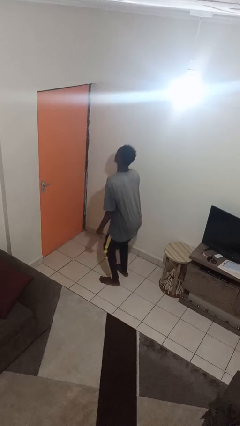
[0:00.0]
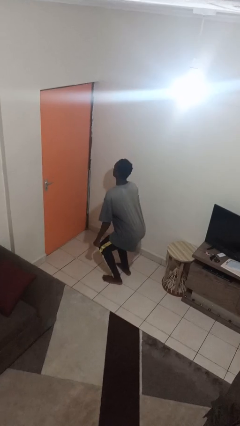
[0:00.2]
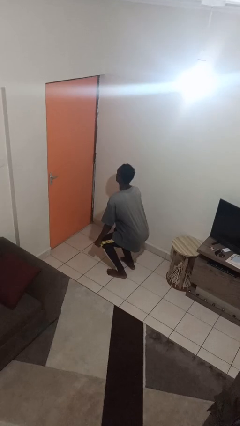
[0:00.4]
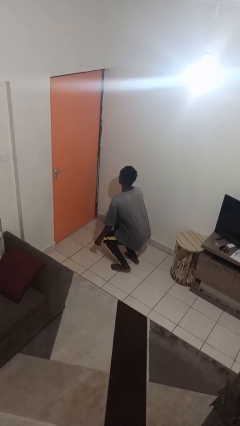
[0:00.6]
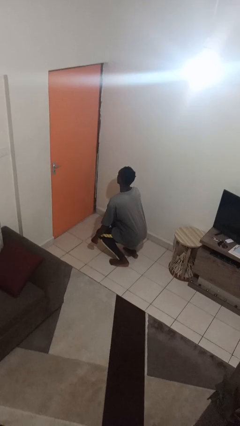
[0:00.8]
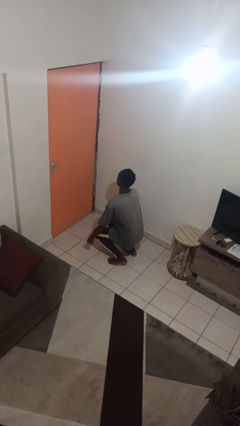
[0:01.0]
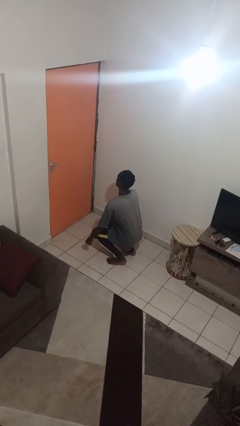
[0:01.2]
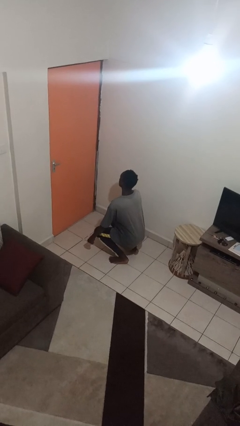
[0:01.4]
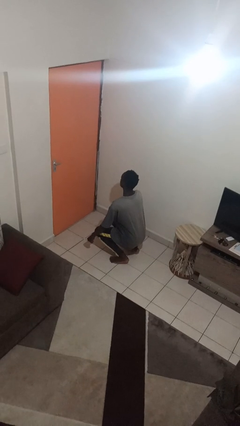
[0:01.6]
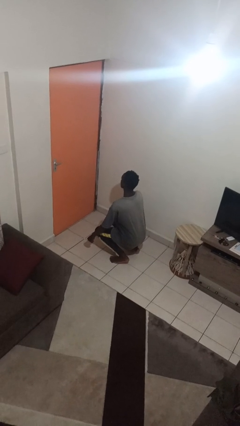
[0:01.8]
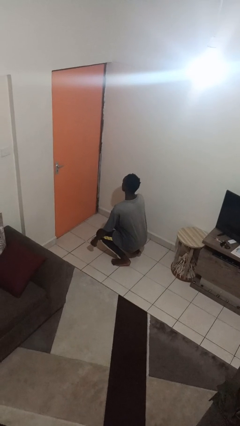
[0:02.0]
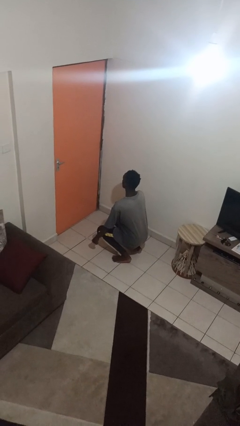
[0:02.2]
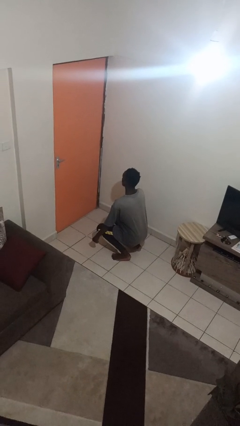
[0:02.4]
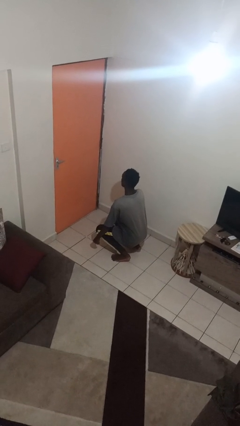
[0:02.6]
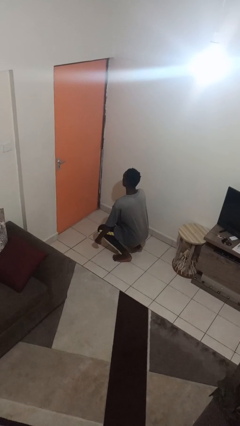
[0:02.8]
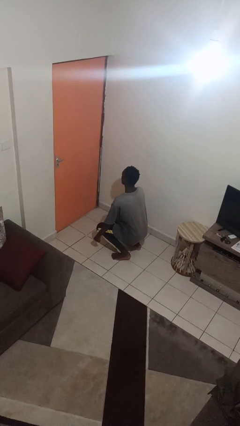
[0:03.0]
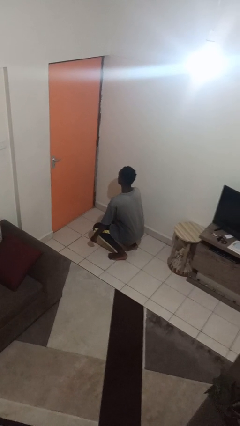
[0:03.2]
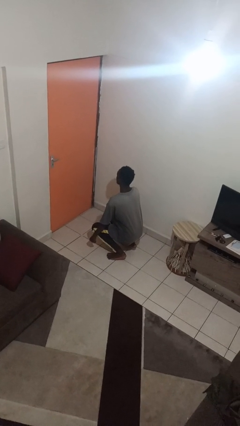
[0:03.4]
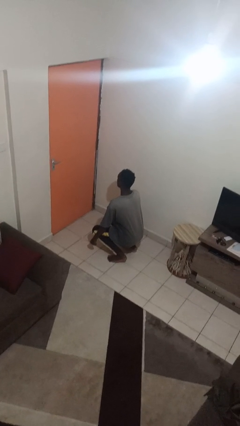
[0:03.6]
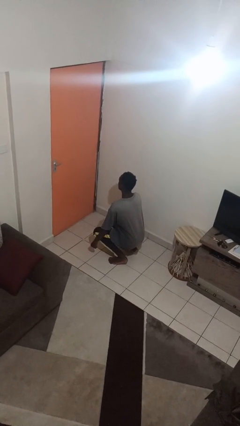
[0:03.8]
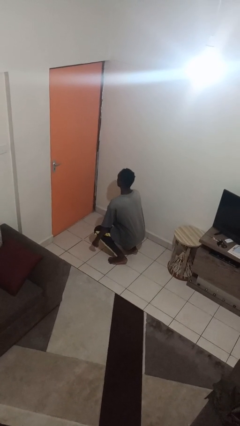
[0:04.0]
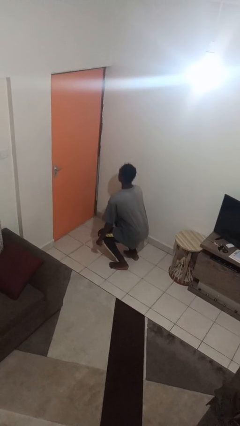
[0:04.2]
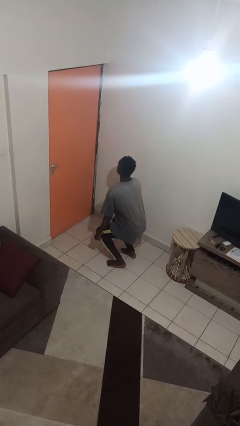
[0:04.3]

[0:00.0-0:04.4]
person squats

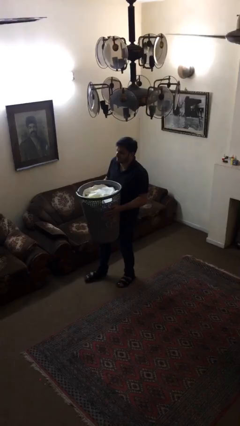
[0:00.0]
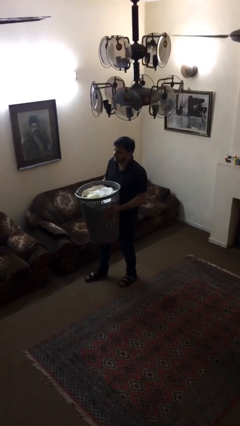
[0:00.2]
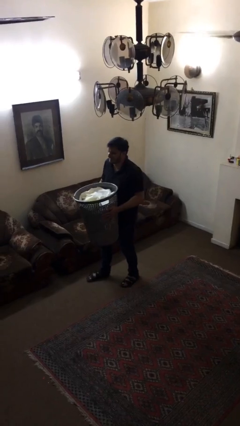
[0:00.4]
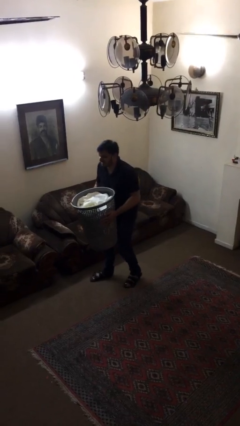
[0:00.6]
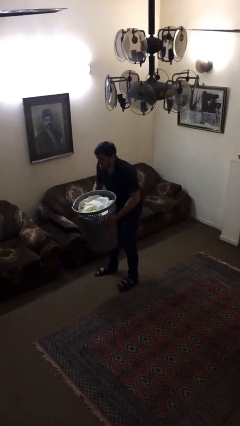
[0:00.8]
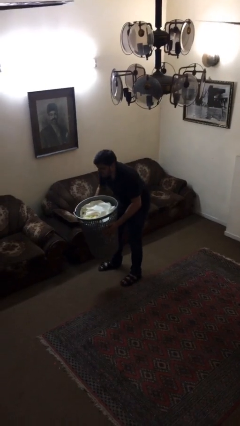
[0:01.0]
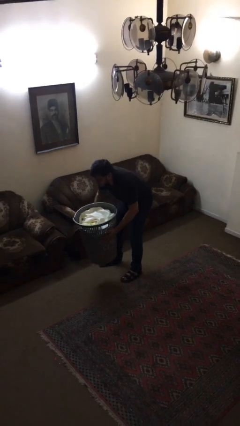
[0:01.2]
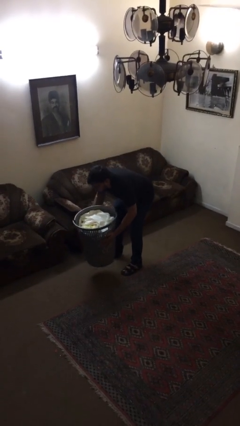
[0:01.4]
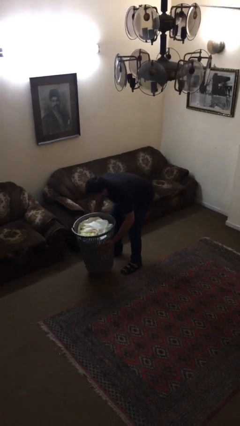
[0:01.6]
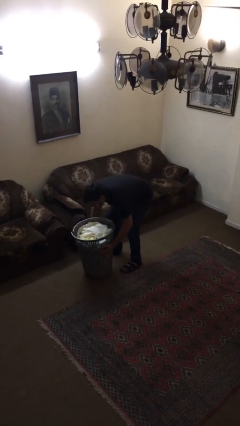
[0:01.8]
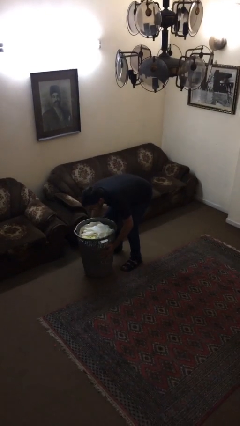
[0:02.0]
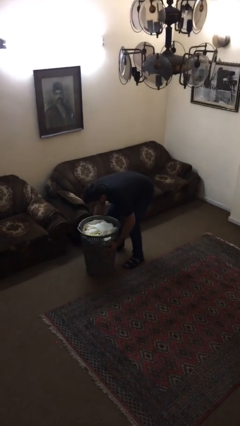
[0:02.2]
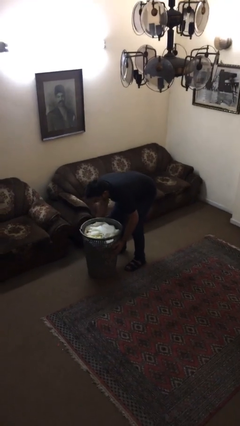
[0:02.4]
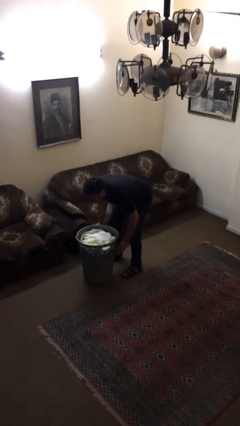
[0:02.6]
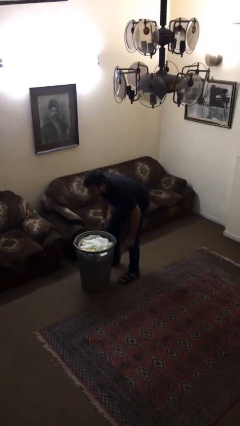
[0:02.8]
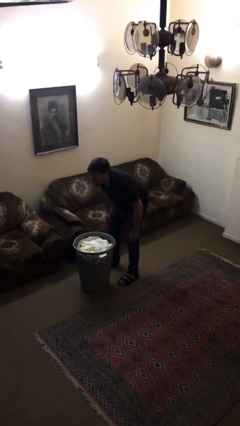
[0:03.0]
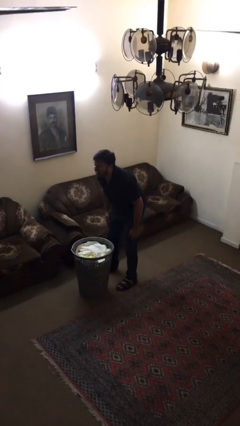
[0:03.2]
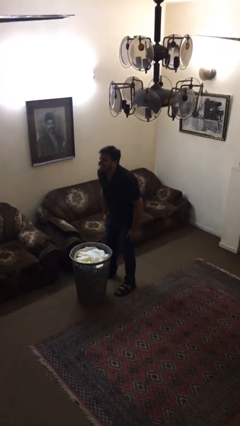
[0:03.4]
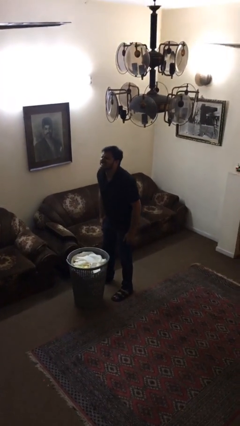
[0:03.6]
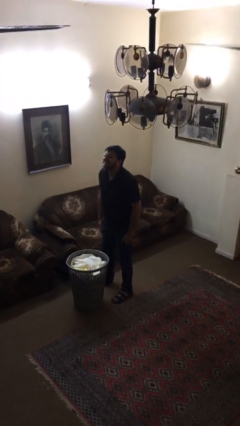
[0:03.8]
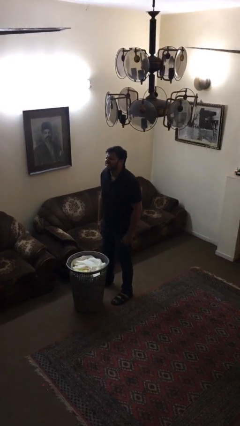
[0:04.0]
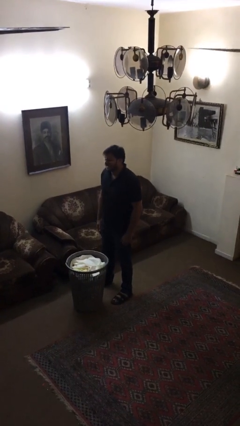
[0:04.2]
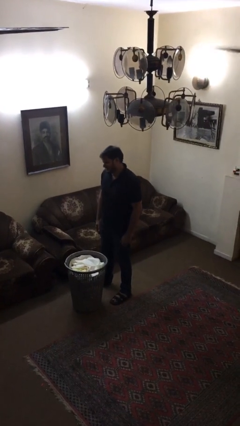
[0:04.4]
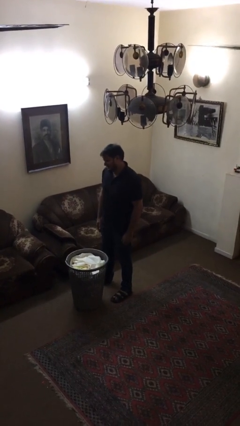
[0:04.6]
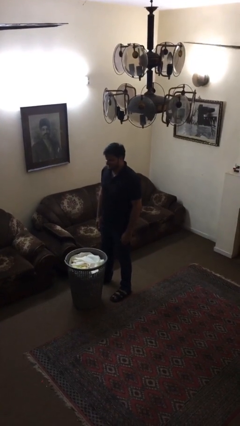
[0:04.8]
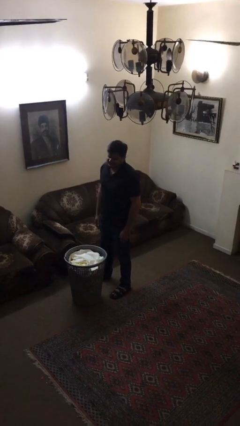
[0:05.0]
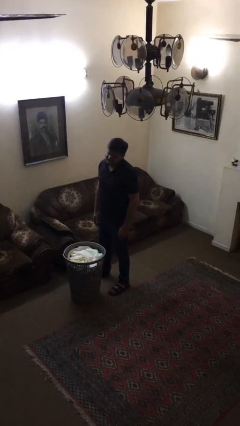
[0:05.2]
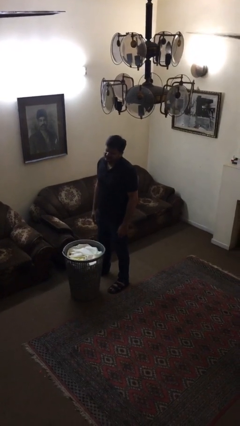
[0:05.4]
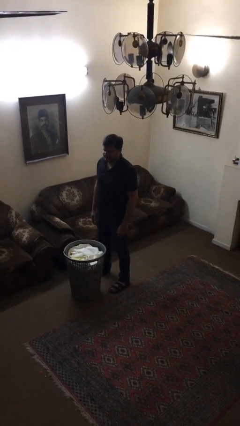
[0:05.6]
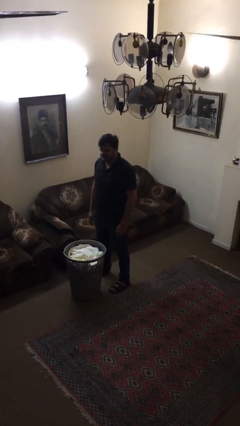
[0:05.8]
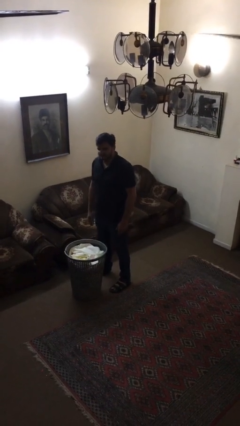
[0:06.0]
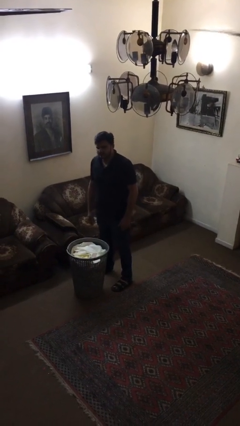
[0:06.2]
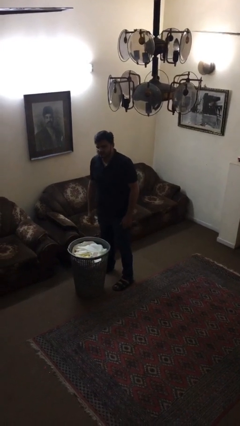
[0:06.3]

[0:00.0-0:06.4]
person puts down object on floor

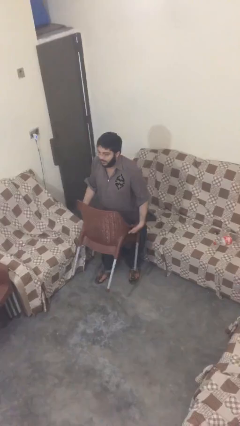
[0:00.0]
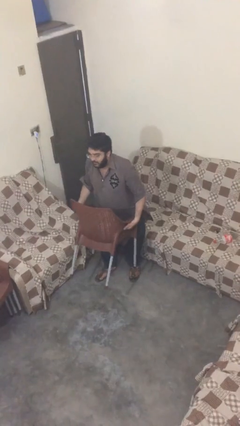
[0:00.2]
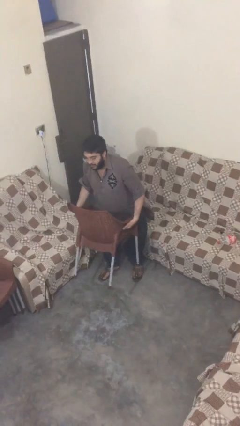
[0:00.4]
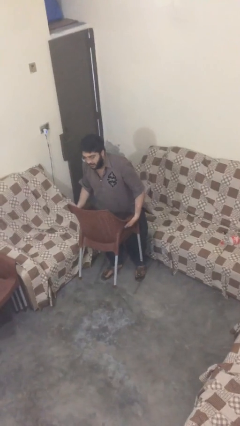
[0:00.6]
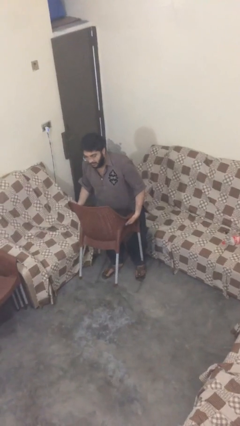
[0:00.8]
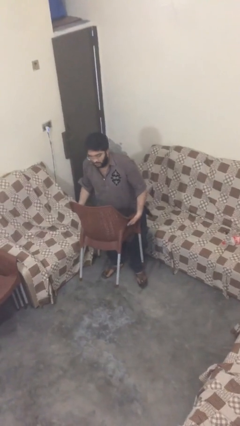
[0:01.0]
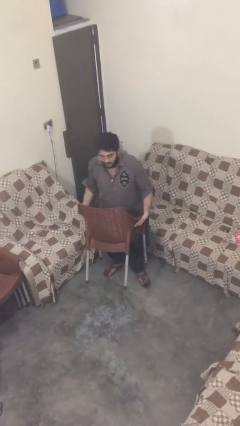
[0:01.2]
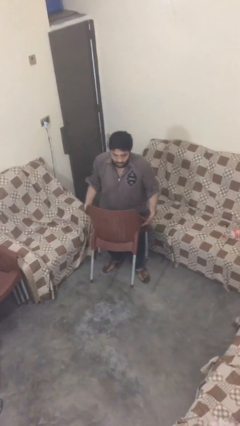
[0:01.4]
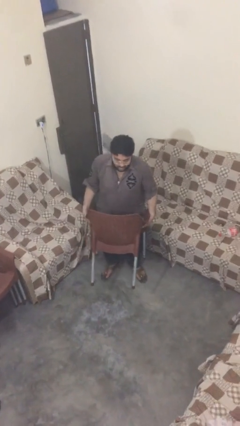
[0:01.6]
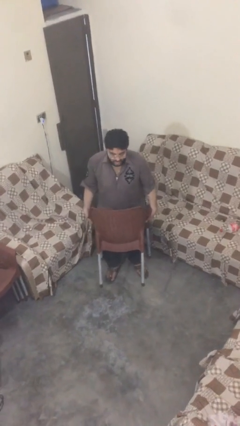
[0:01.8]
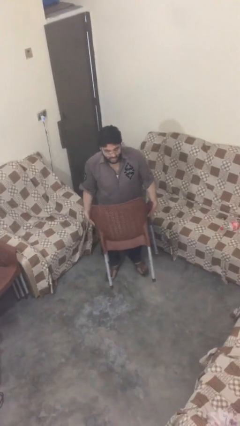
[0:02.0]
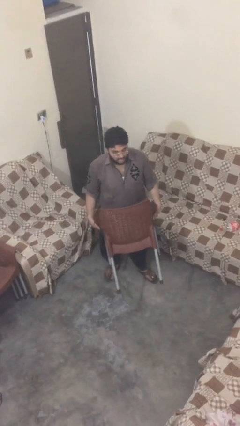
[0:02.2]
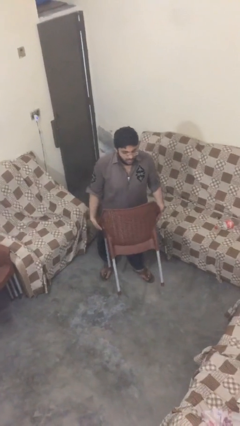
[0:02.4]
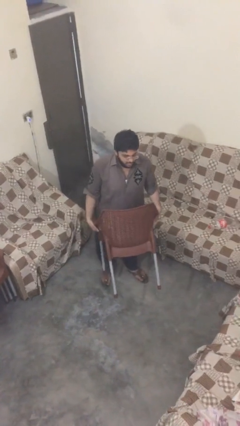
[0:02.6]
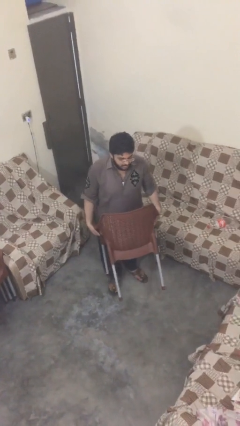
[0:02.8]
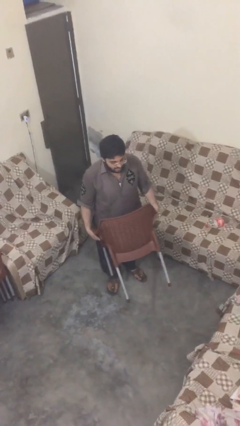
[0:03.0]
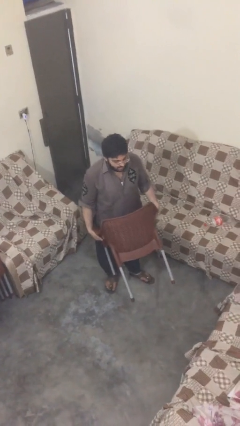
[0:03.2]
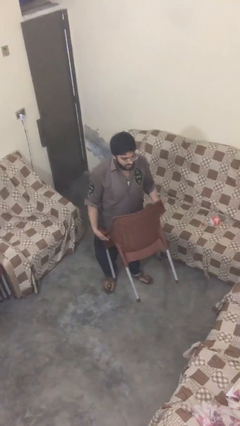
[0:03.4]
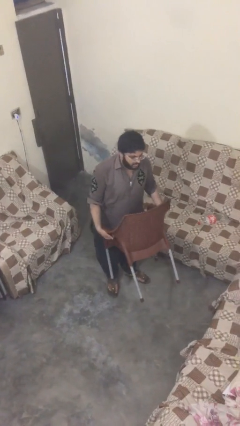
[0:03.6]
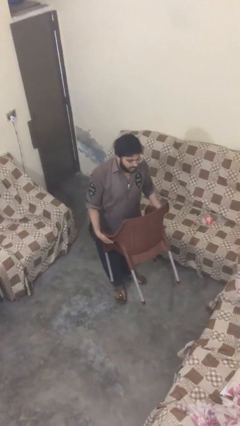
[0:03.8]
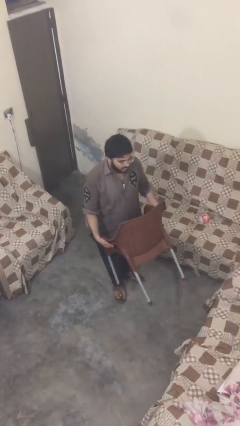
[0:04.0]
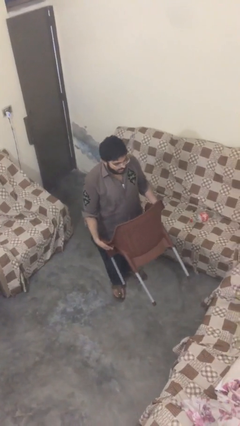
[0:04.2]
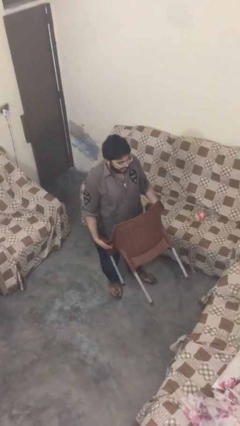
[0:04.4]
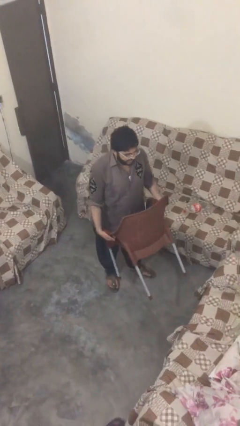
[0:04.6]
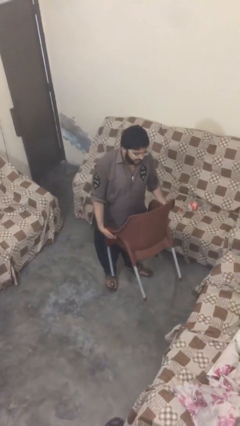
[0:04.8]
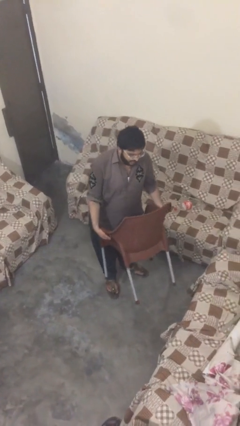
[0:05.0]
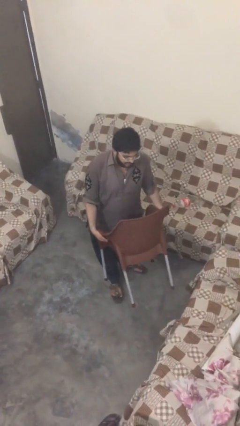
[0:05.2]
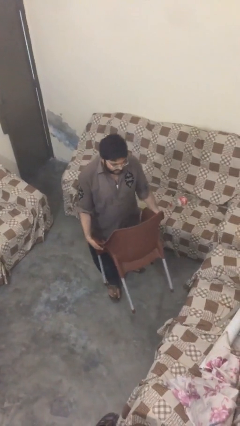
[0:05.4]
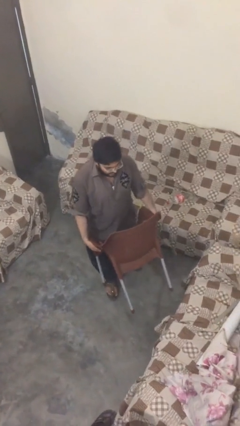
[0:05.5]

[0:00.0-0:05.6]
person carries heavy object

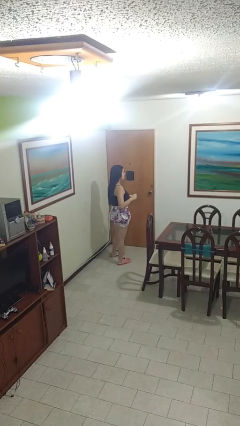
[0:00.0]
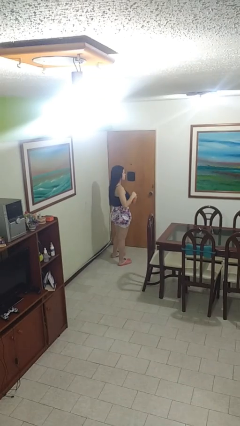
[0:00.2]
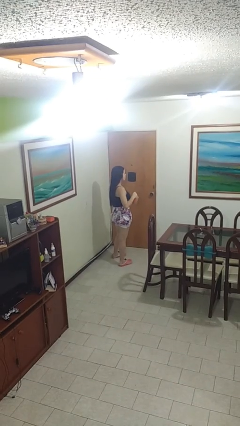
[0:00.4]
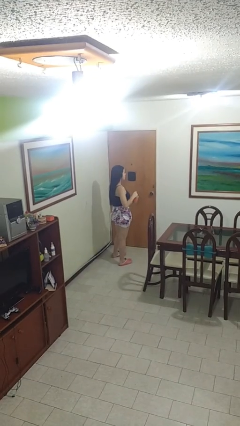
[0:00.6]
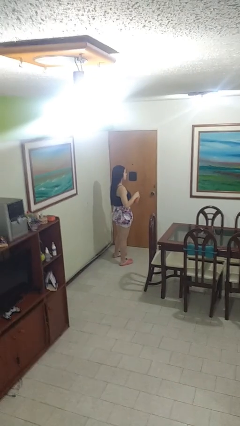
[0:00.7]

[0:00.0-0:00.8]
person stirs mug

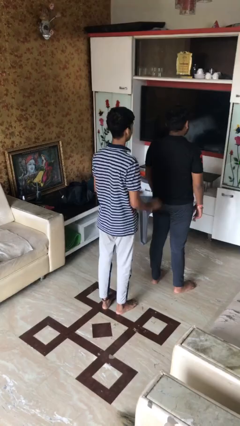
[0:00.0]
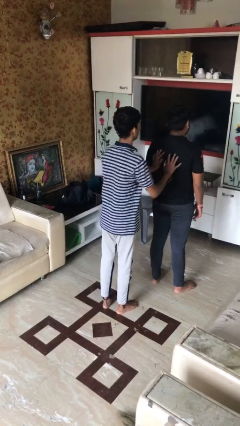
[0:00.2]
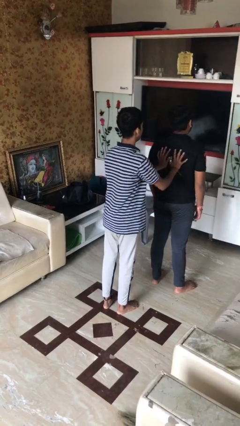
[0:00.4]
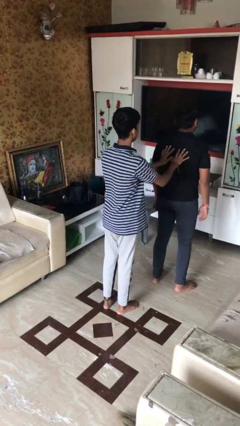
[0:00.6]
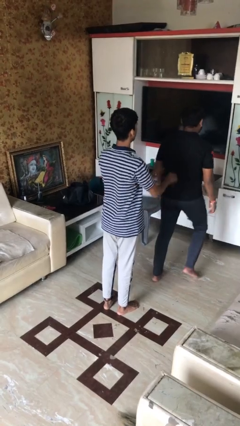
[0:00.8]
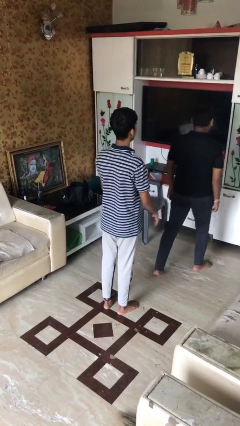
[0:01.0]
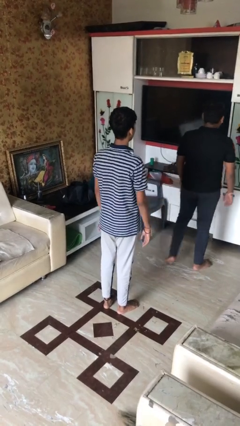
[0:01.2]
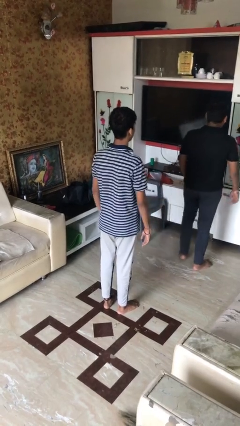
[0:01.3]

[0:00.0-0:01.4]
person shoves person
